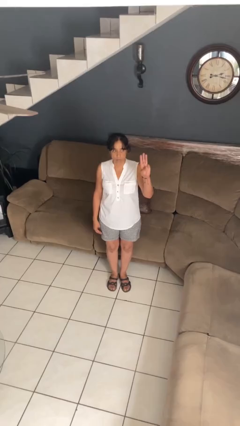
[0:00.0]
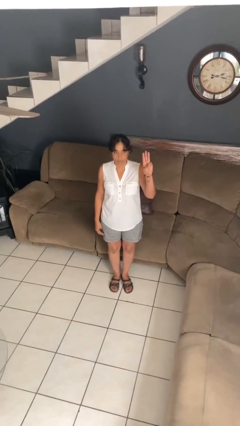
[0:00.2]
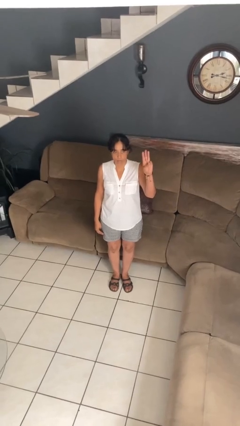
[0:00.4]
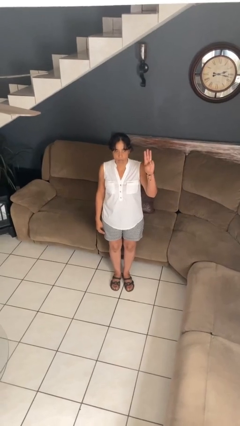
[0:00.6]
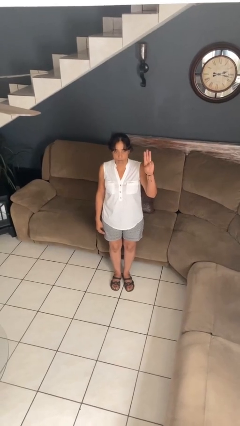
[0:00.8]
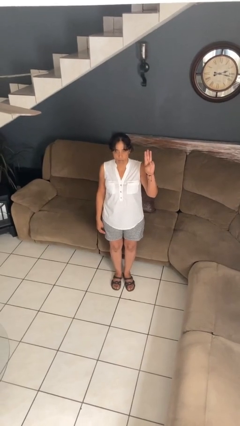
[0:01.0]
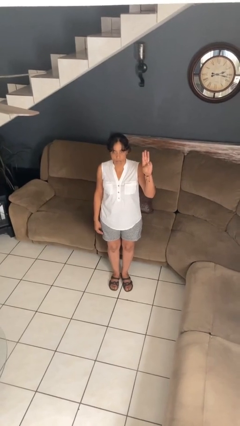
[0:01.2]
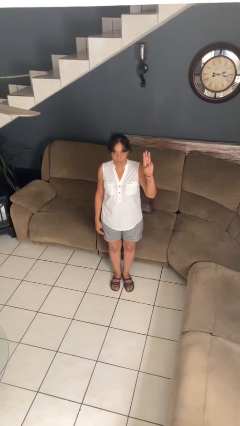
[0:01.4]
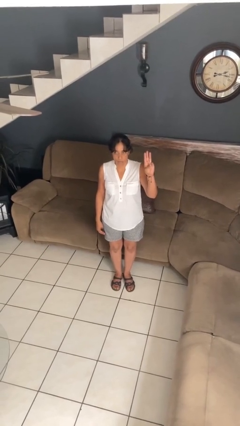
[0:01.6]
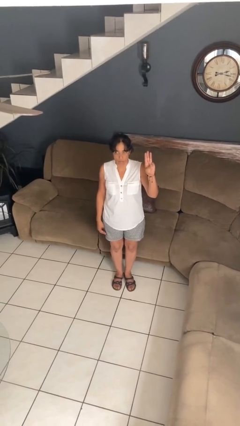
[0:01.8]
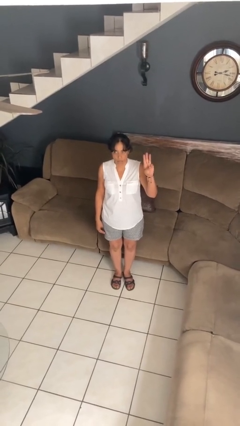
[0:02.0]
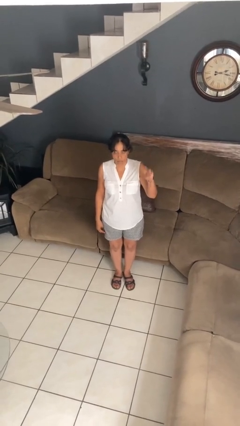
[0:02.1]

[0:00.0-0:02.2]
person gestures number three

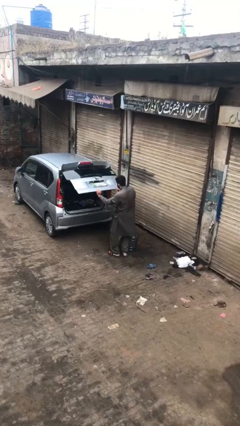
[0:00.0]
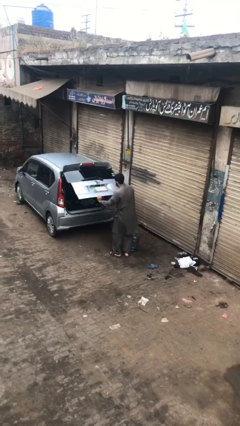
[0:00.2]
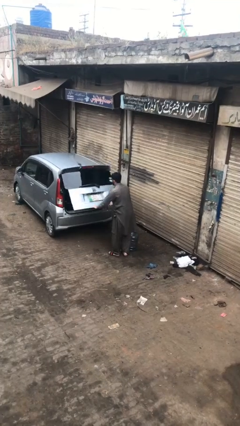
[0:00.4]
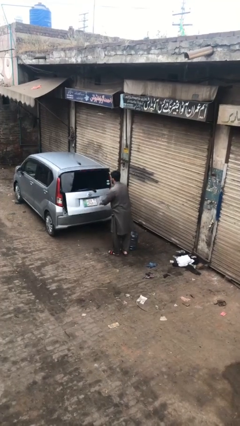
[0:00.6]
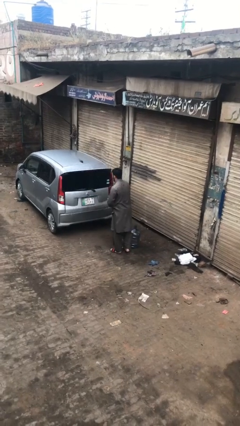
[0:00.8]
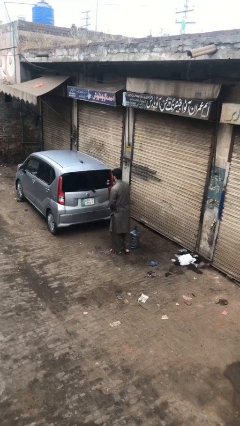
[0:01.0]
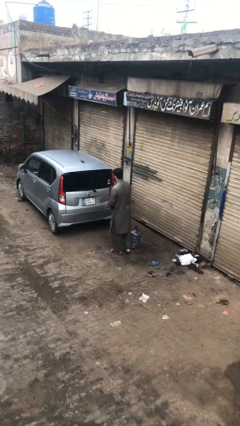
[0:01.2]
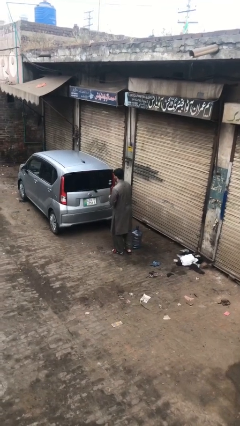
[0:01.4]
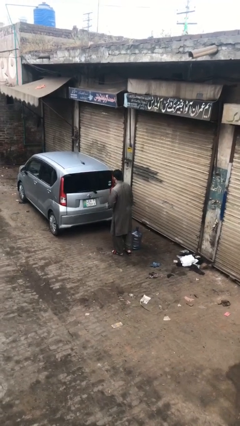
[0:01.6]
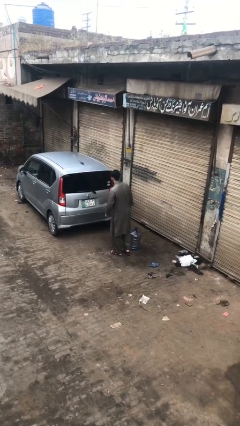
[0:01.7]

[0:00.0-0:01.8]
person closes car trunk

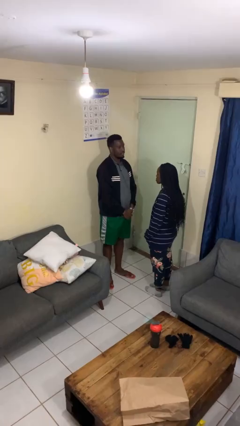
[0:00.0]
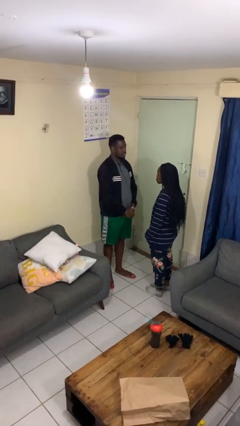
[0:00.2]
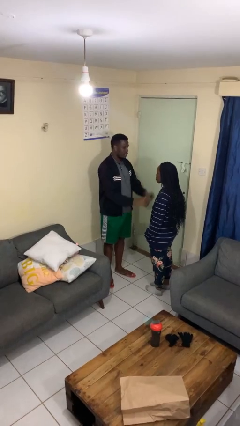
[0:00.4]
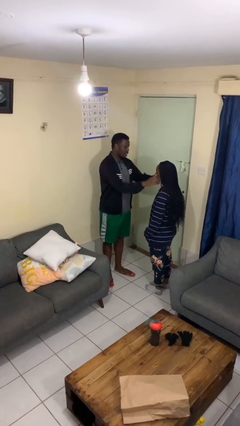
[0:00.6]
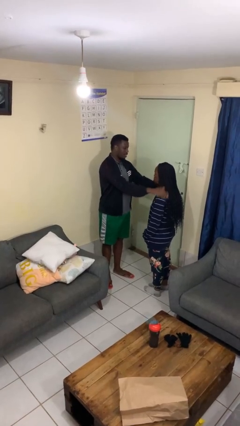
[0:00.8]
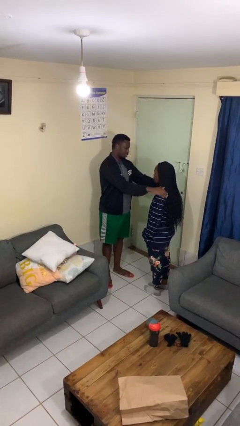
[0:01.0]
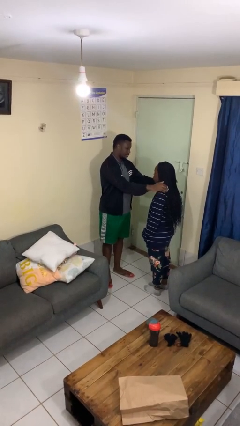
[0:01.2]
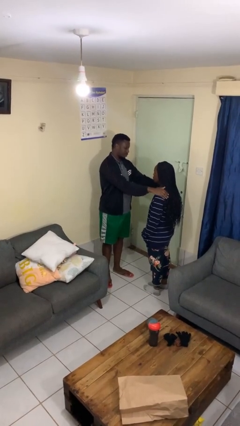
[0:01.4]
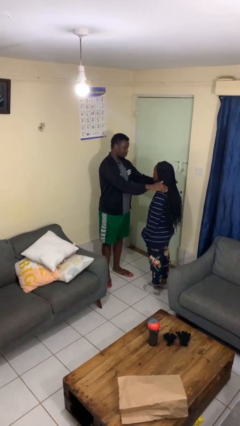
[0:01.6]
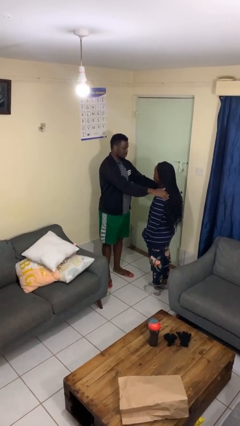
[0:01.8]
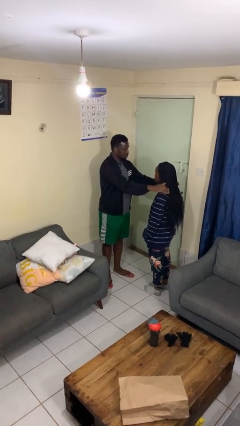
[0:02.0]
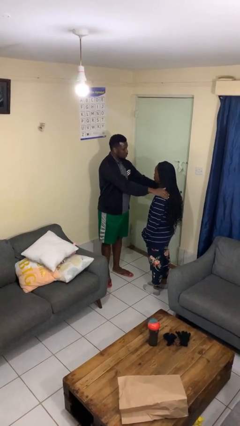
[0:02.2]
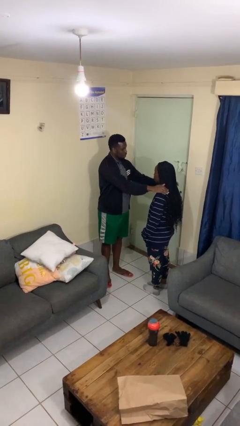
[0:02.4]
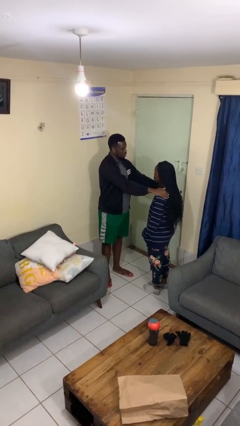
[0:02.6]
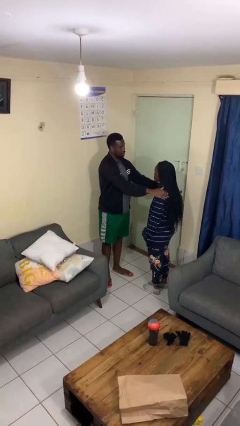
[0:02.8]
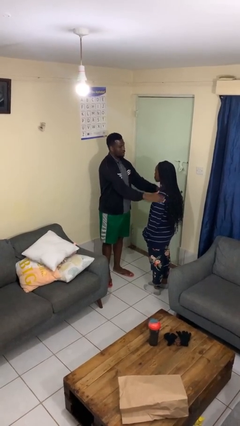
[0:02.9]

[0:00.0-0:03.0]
person pounds shoulders of person

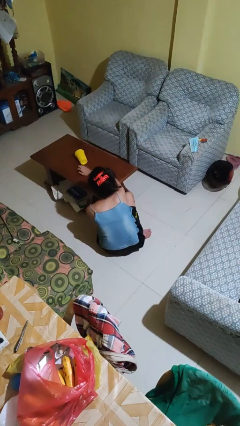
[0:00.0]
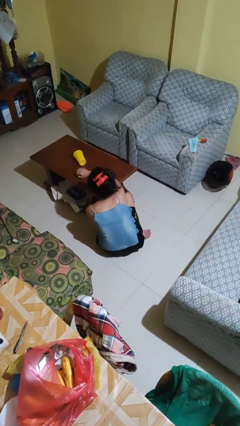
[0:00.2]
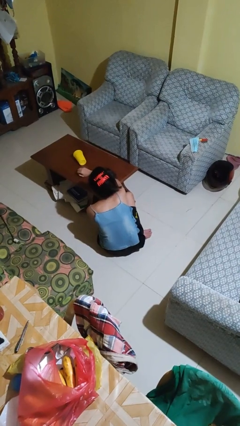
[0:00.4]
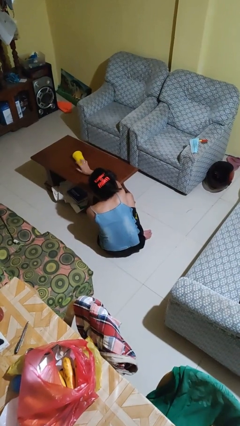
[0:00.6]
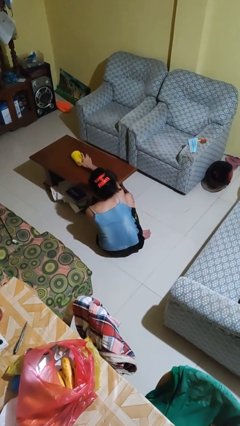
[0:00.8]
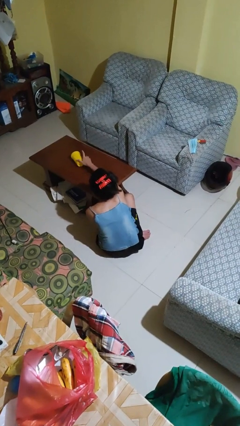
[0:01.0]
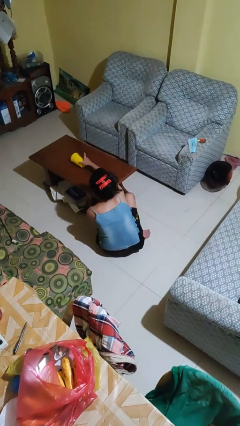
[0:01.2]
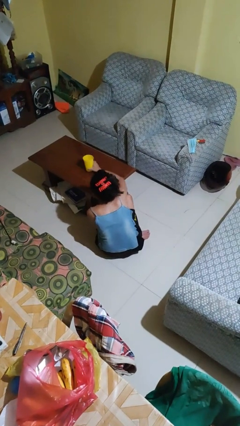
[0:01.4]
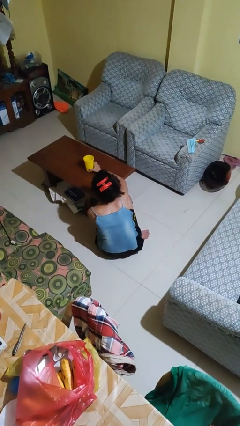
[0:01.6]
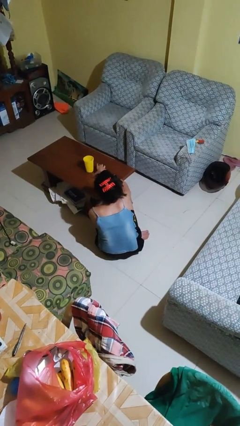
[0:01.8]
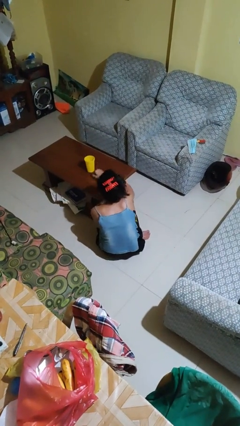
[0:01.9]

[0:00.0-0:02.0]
person sets upright glass

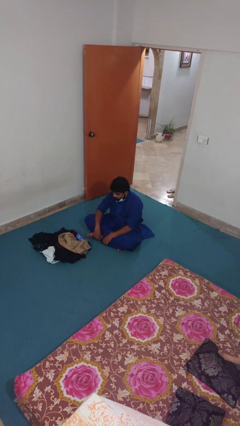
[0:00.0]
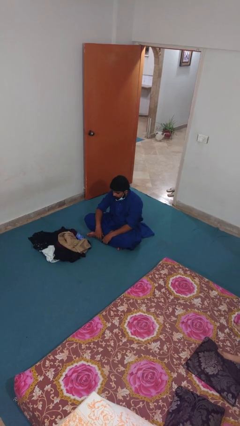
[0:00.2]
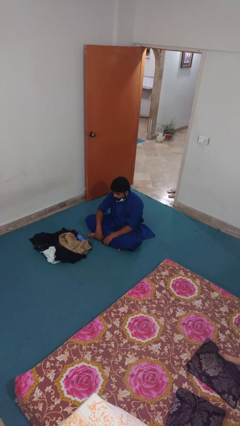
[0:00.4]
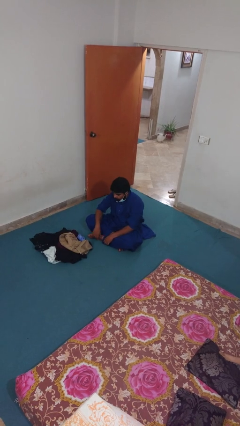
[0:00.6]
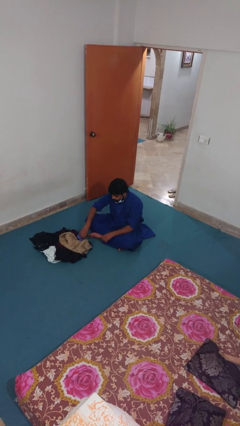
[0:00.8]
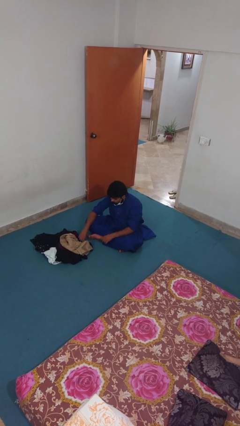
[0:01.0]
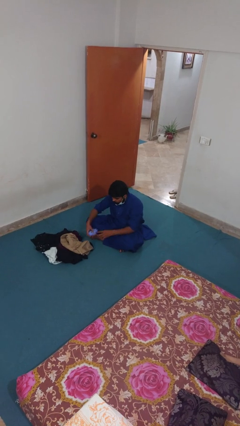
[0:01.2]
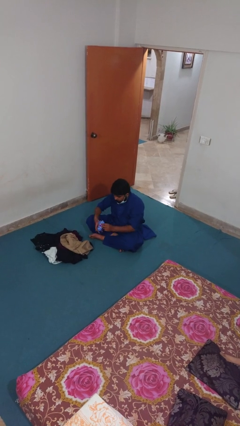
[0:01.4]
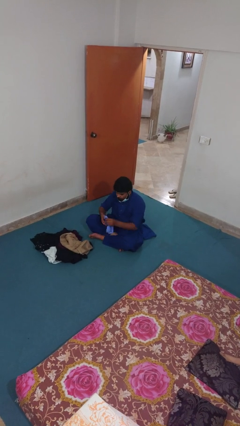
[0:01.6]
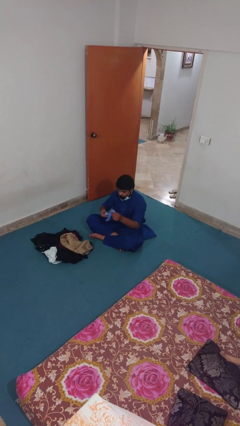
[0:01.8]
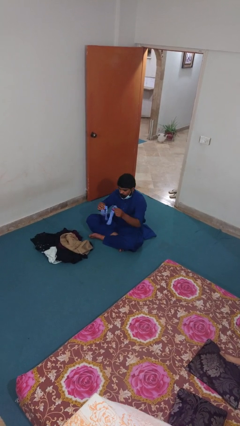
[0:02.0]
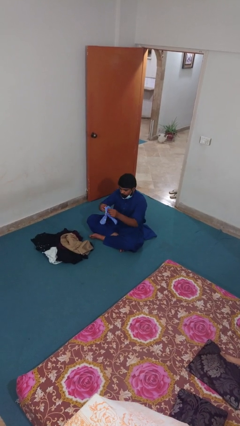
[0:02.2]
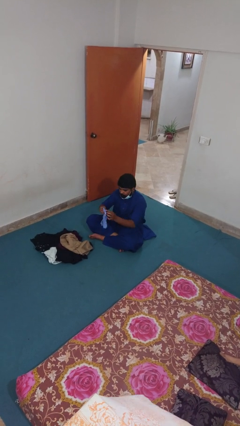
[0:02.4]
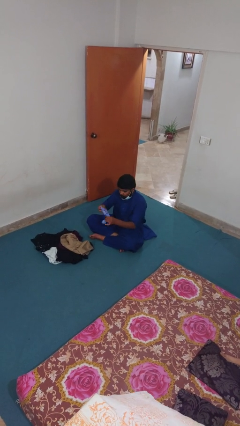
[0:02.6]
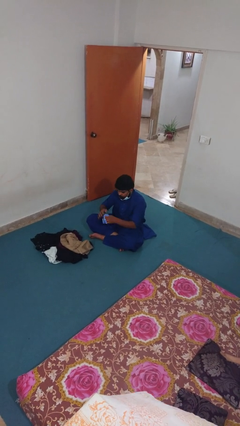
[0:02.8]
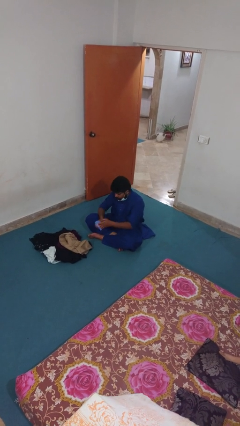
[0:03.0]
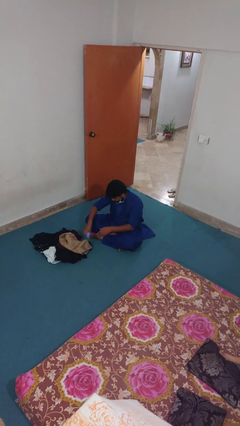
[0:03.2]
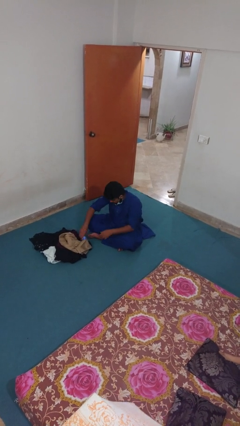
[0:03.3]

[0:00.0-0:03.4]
person folds socks

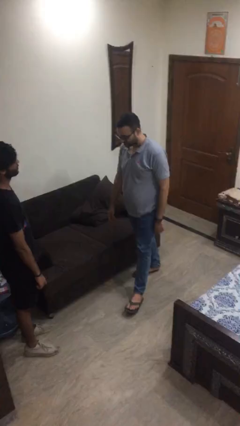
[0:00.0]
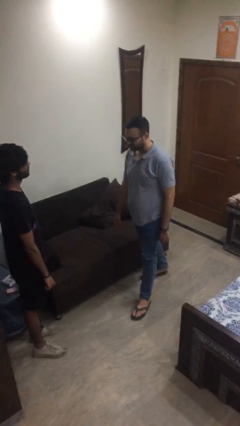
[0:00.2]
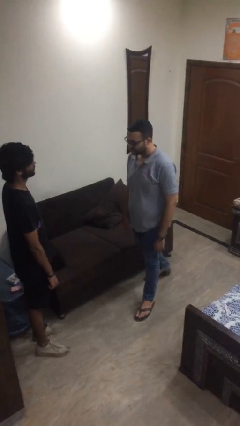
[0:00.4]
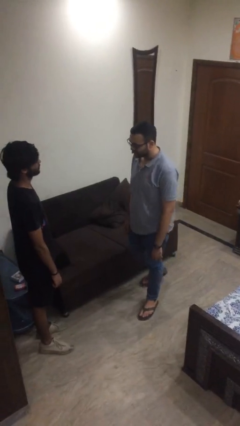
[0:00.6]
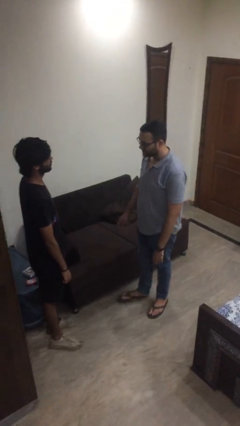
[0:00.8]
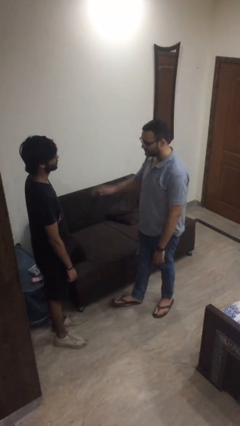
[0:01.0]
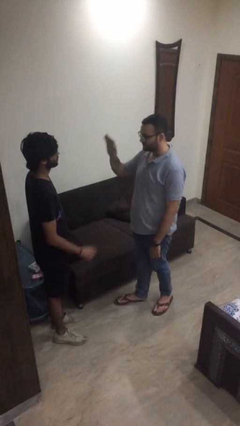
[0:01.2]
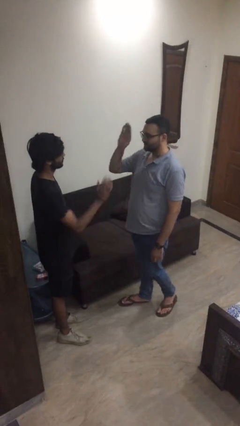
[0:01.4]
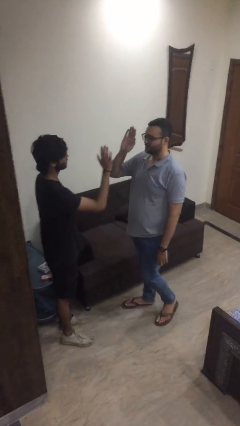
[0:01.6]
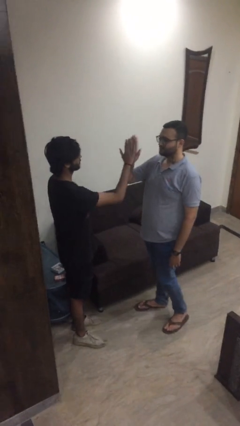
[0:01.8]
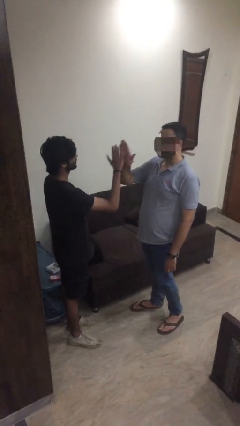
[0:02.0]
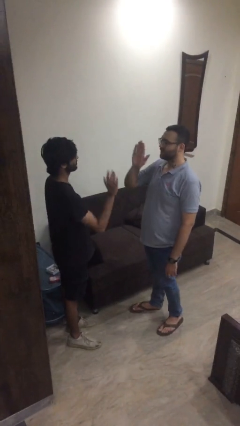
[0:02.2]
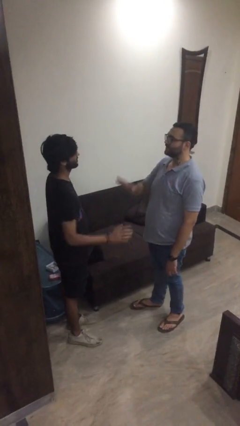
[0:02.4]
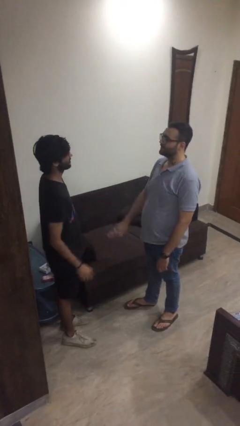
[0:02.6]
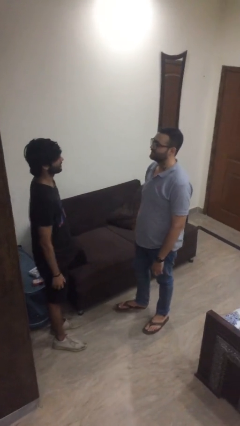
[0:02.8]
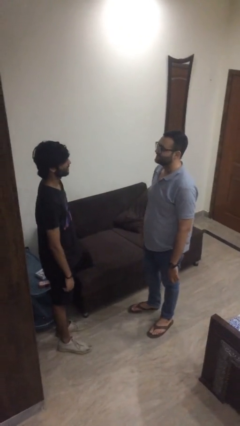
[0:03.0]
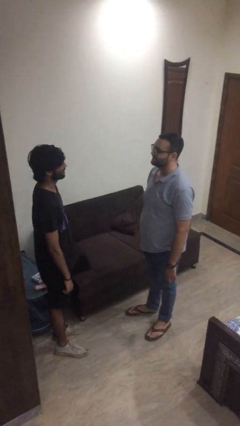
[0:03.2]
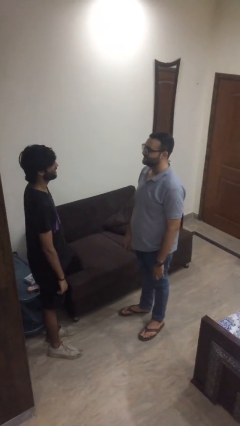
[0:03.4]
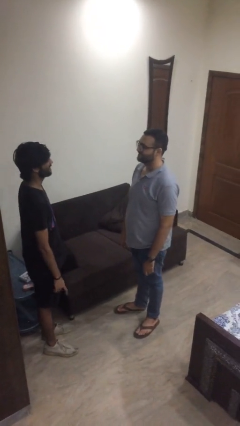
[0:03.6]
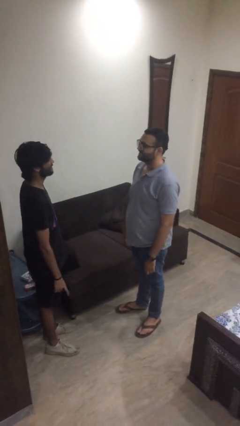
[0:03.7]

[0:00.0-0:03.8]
person highfives hand

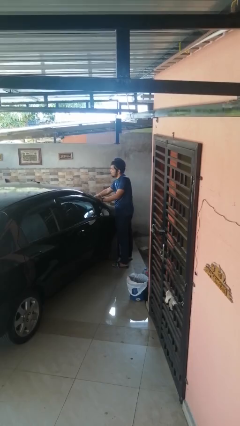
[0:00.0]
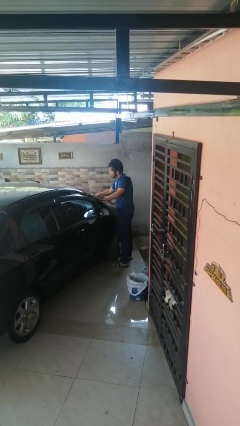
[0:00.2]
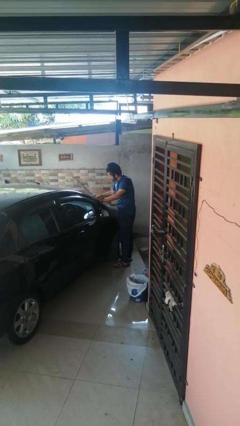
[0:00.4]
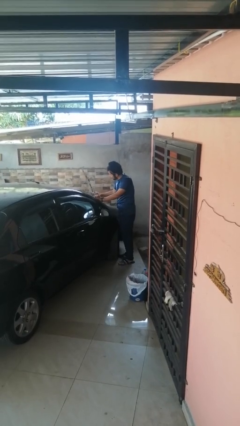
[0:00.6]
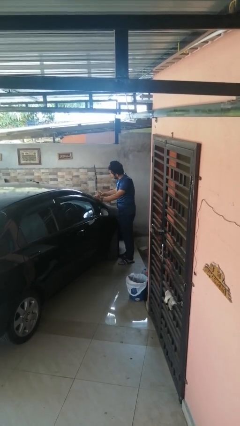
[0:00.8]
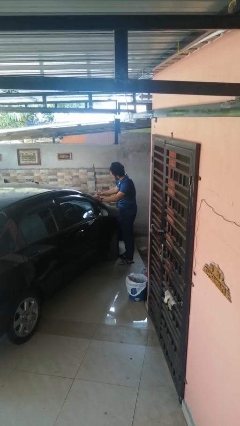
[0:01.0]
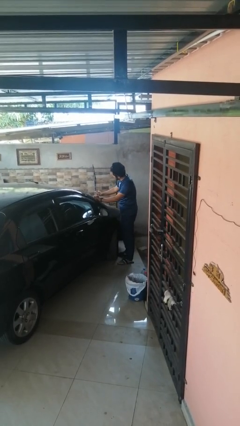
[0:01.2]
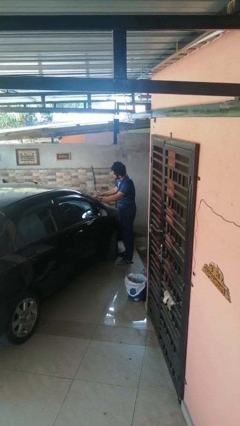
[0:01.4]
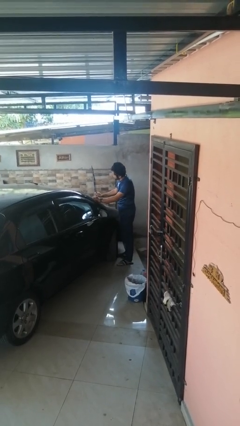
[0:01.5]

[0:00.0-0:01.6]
person flips up car wipers
